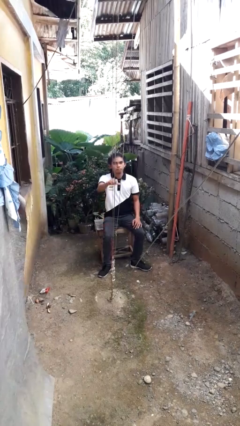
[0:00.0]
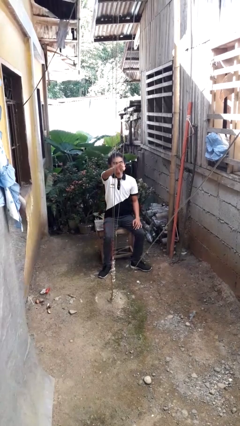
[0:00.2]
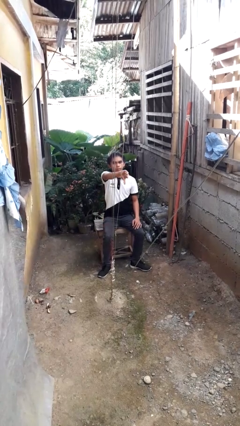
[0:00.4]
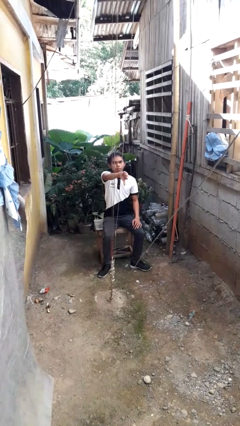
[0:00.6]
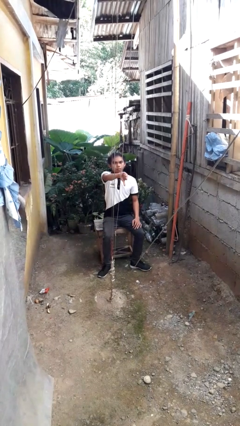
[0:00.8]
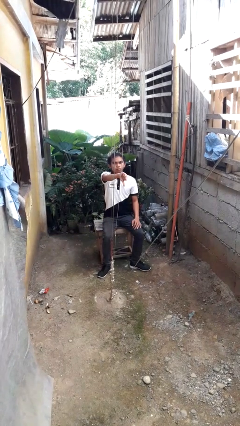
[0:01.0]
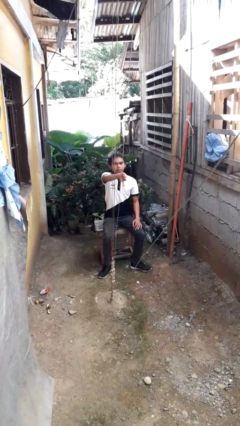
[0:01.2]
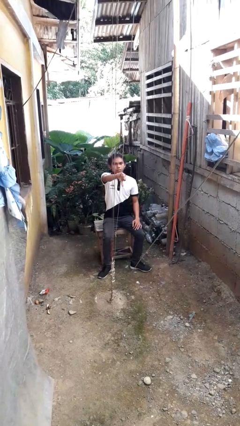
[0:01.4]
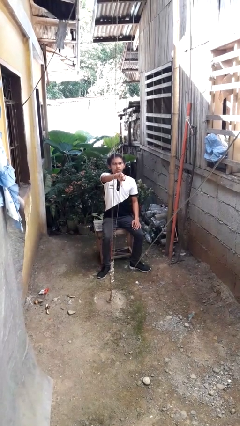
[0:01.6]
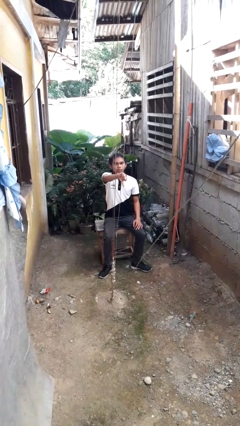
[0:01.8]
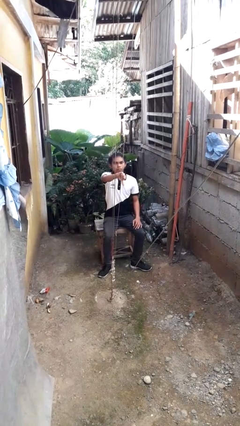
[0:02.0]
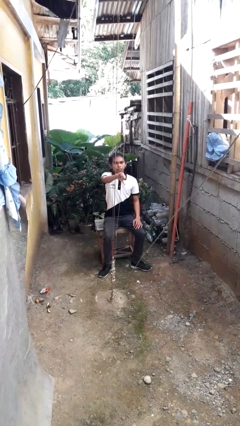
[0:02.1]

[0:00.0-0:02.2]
person gestures thumbs down

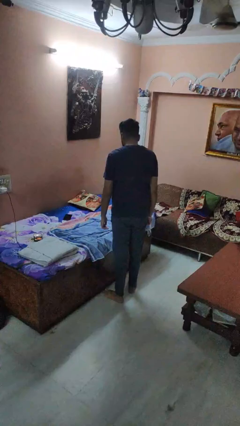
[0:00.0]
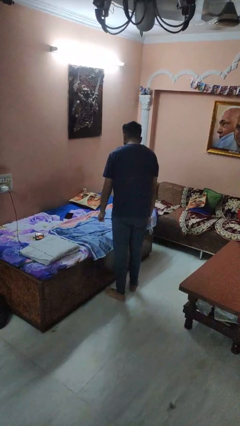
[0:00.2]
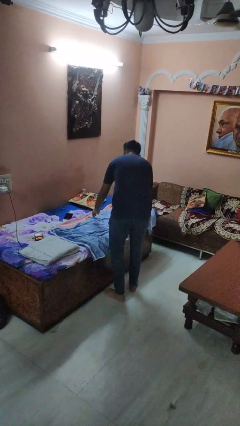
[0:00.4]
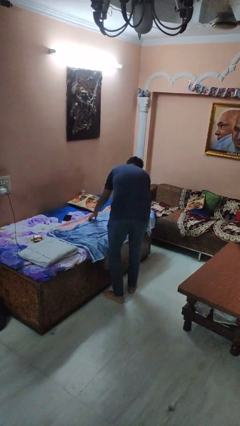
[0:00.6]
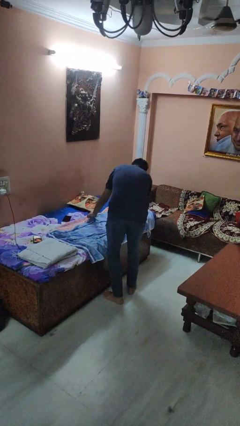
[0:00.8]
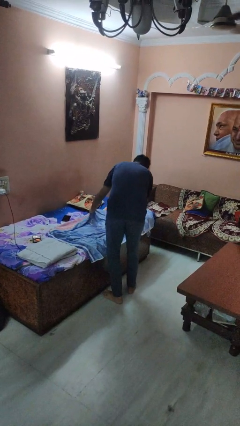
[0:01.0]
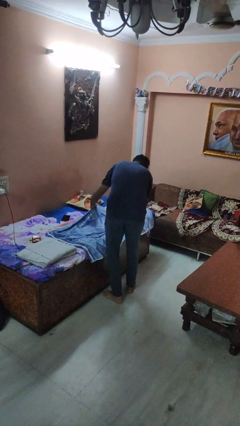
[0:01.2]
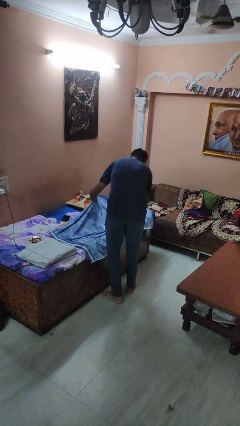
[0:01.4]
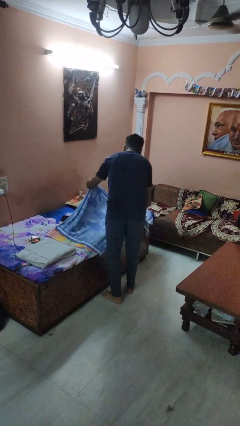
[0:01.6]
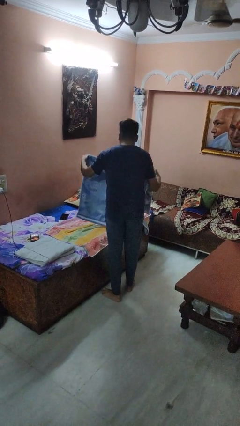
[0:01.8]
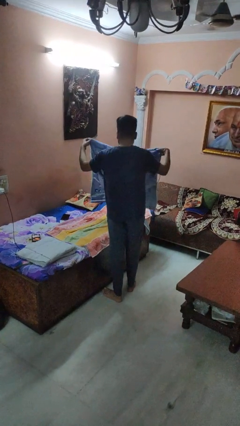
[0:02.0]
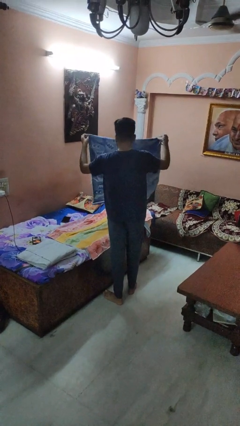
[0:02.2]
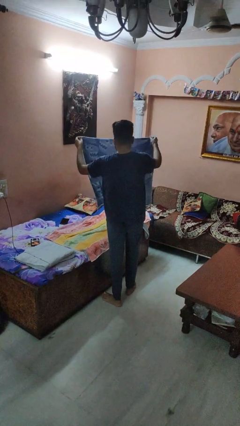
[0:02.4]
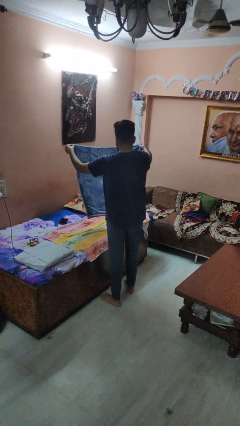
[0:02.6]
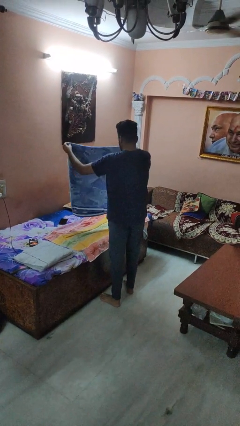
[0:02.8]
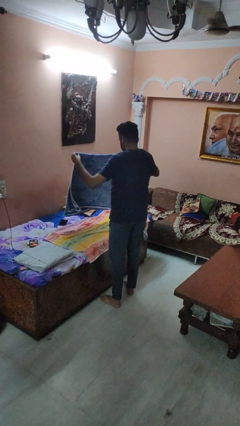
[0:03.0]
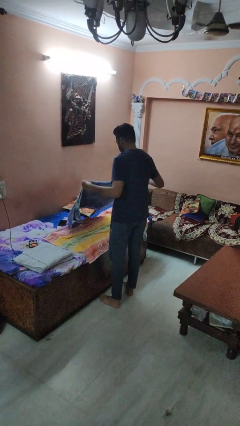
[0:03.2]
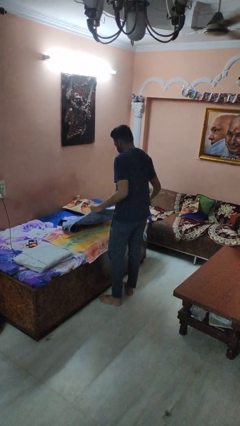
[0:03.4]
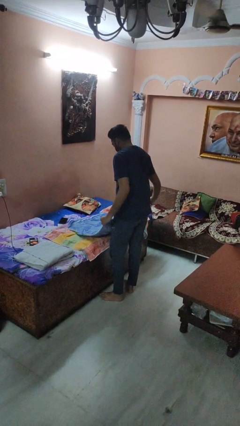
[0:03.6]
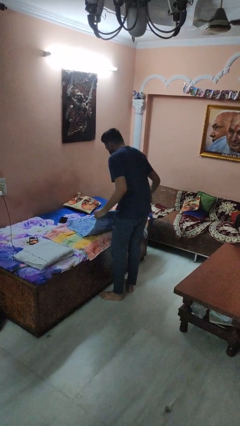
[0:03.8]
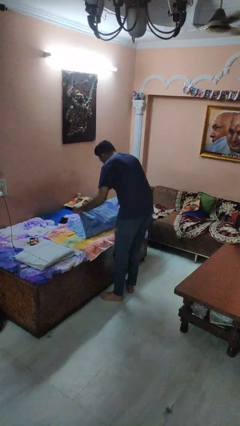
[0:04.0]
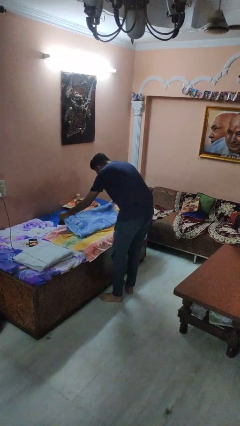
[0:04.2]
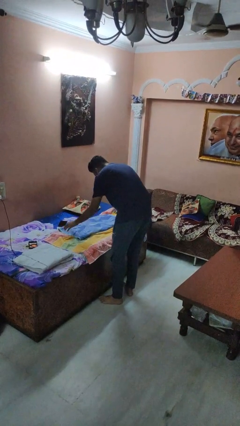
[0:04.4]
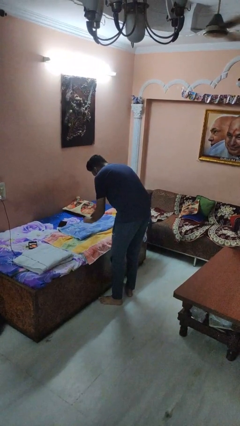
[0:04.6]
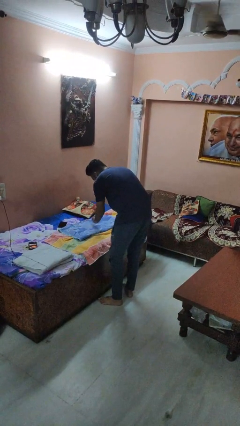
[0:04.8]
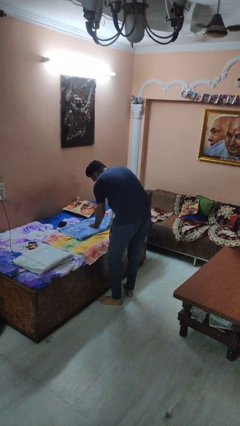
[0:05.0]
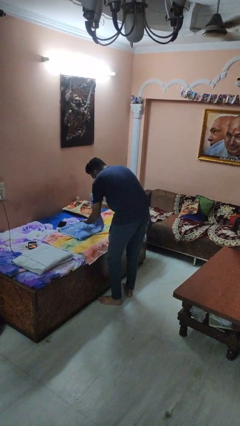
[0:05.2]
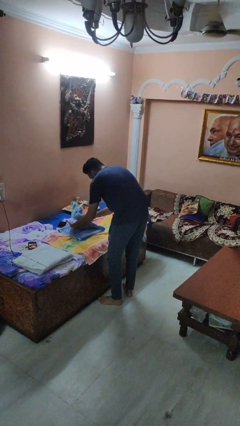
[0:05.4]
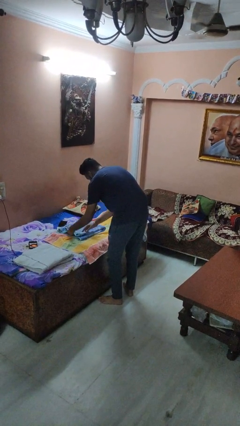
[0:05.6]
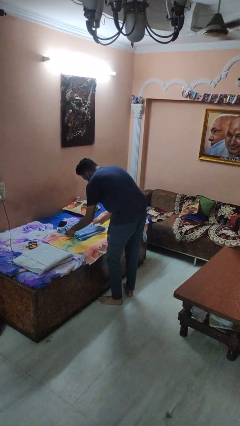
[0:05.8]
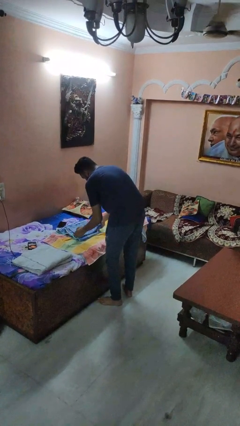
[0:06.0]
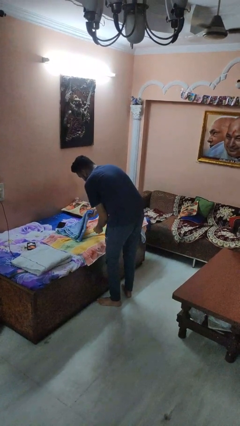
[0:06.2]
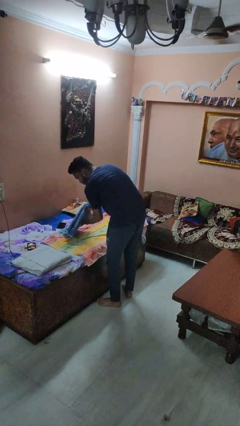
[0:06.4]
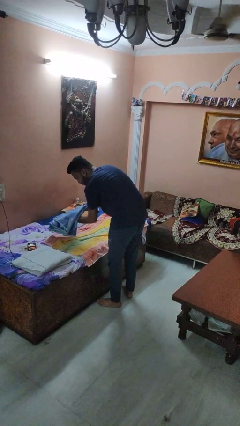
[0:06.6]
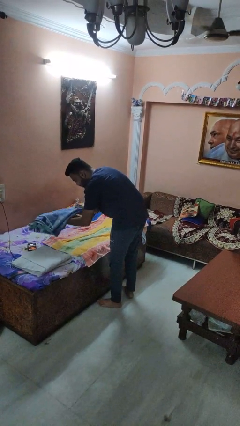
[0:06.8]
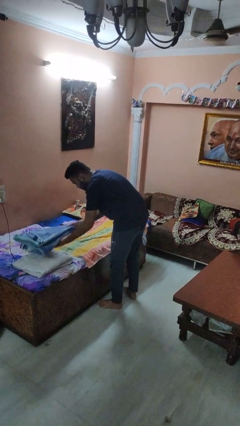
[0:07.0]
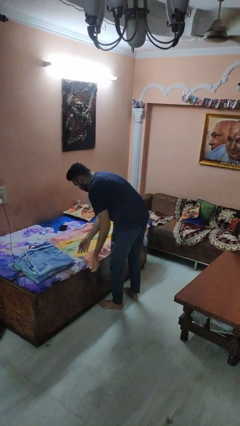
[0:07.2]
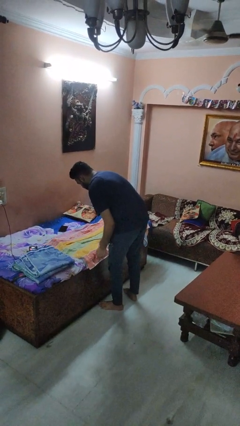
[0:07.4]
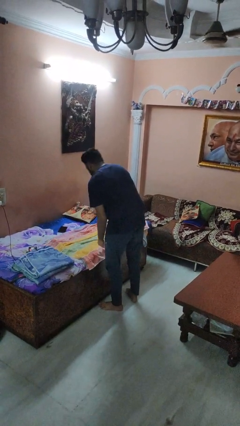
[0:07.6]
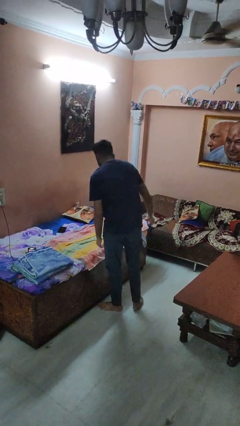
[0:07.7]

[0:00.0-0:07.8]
person folds towel

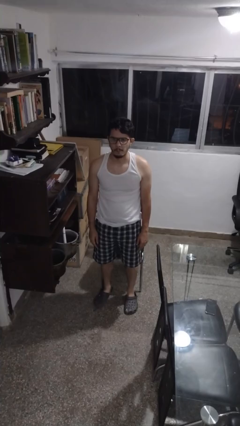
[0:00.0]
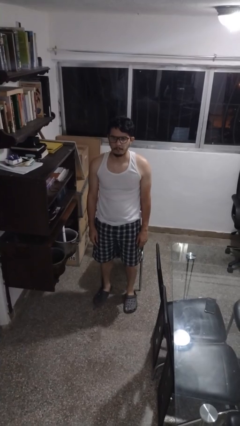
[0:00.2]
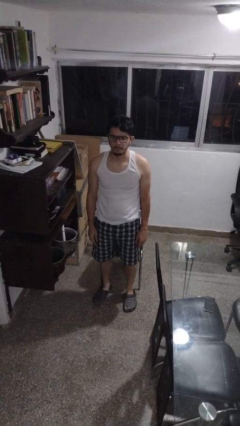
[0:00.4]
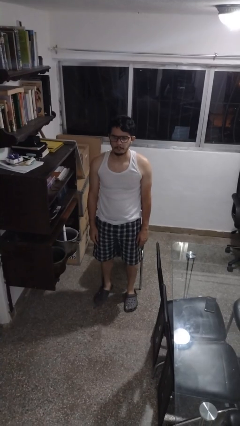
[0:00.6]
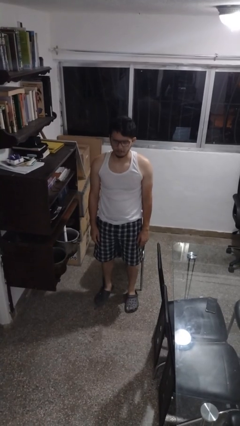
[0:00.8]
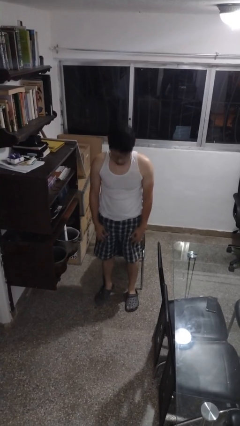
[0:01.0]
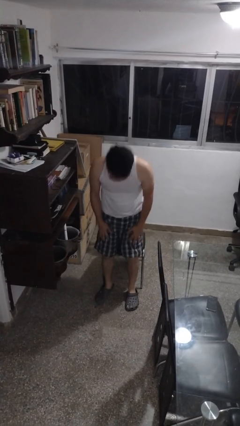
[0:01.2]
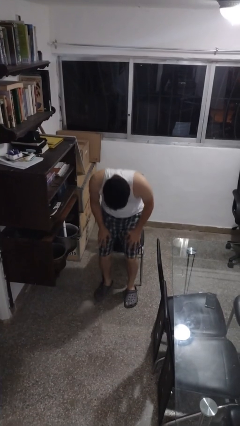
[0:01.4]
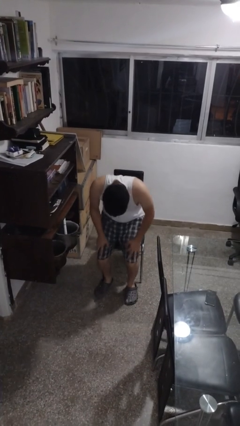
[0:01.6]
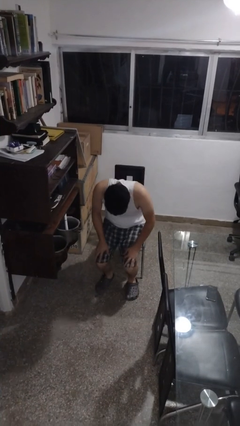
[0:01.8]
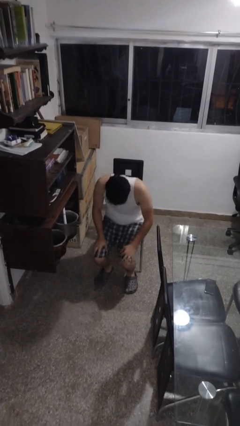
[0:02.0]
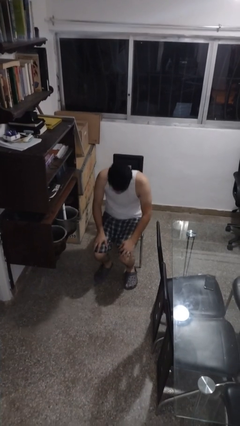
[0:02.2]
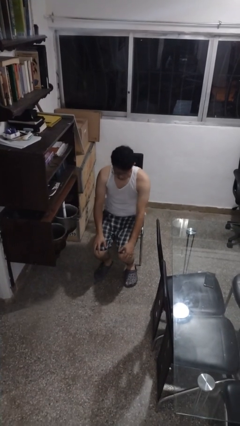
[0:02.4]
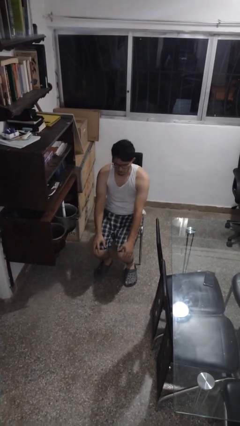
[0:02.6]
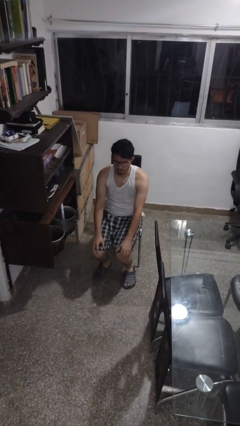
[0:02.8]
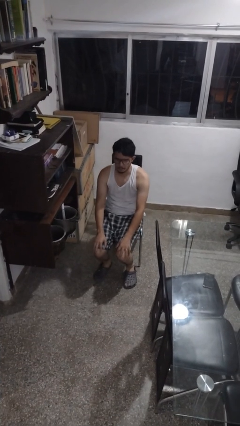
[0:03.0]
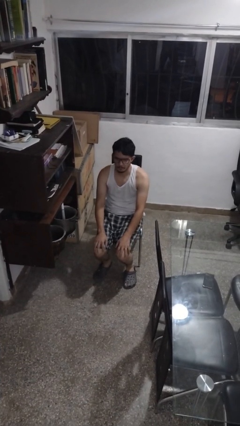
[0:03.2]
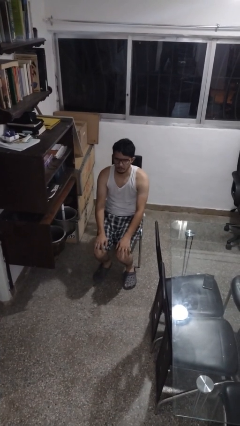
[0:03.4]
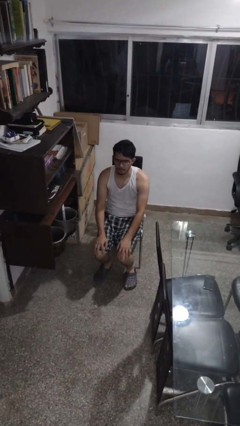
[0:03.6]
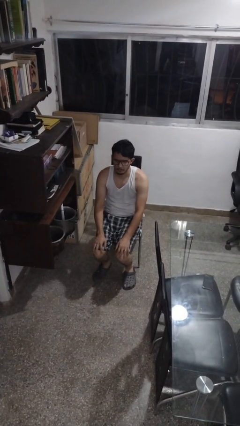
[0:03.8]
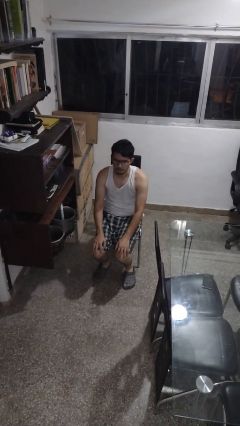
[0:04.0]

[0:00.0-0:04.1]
person sits down

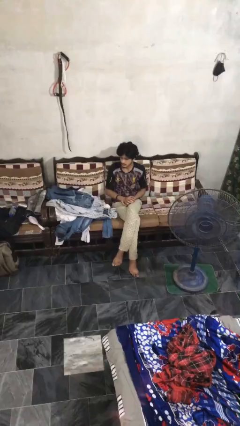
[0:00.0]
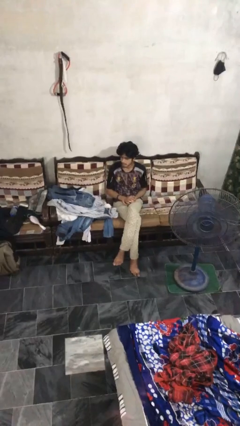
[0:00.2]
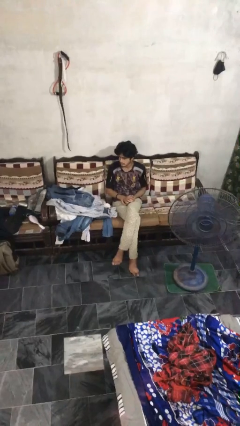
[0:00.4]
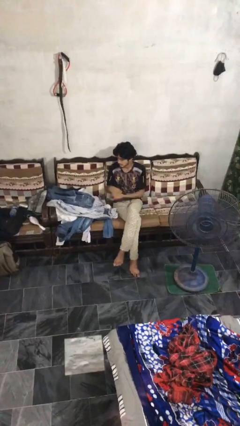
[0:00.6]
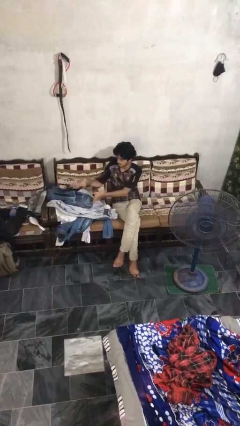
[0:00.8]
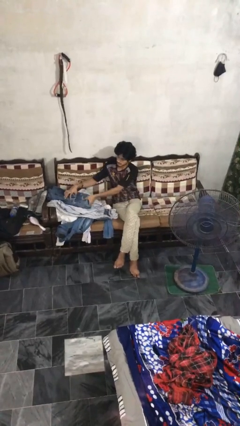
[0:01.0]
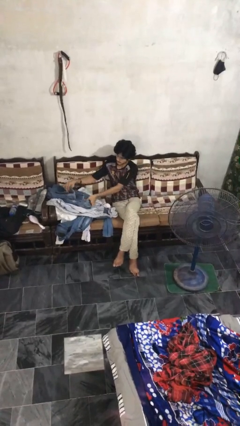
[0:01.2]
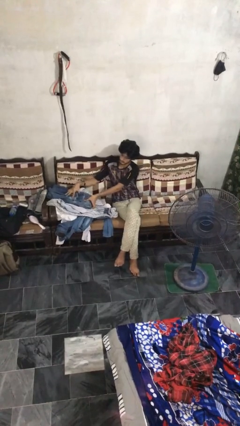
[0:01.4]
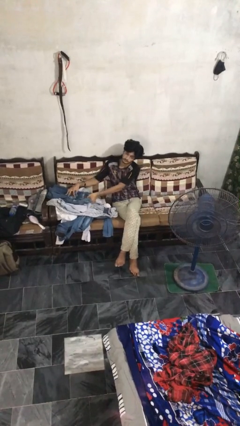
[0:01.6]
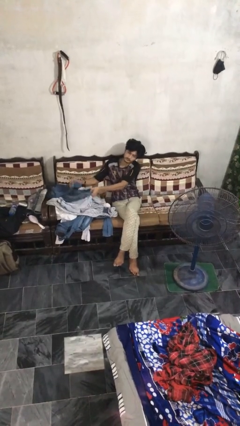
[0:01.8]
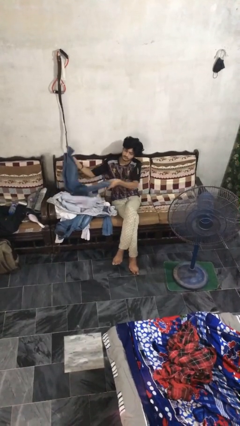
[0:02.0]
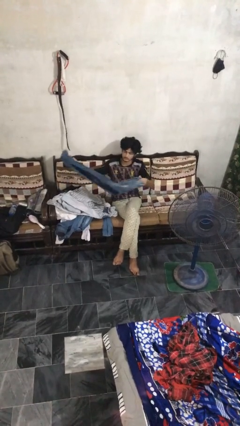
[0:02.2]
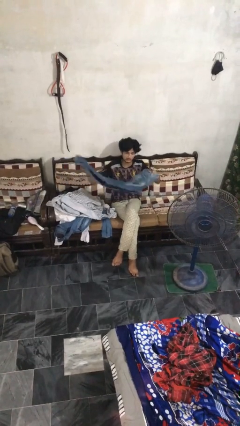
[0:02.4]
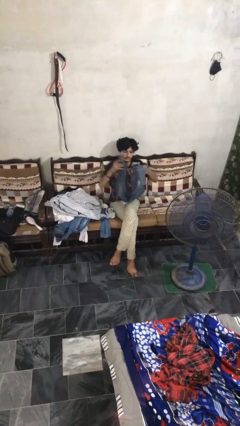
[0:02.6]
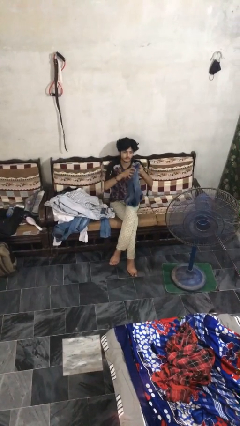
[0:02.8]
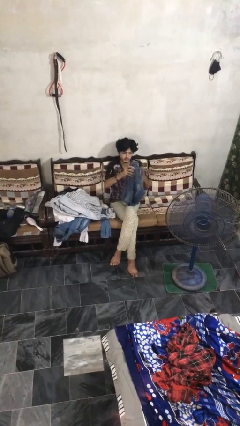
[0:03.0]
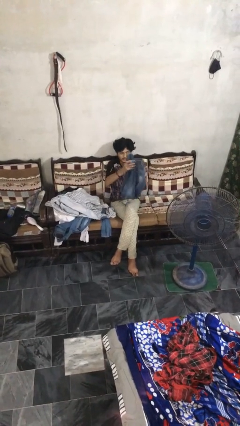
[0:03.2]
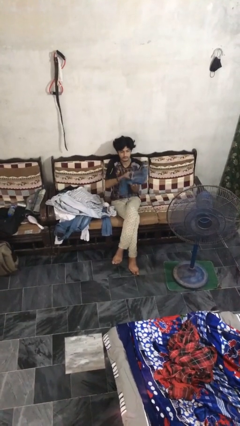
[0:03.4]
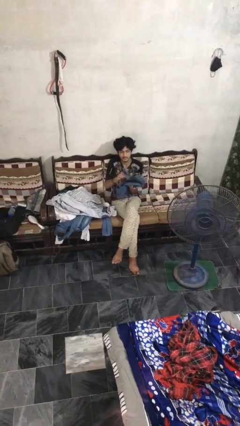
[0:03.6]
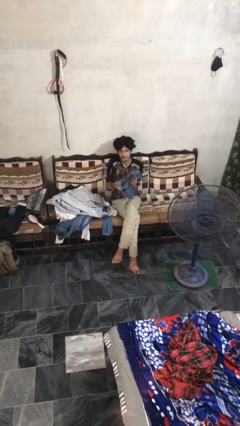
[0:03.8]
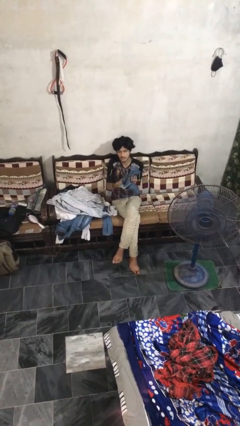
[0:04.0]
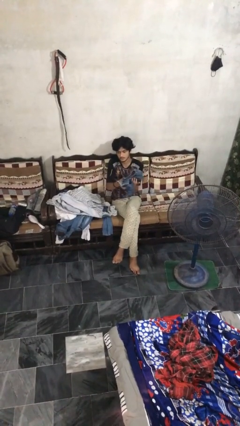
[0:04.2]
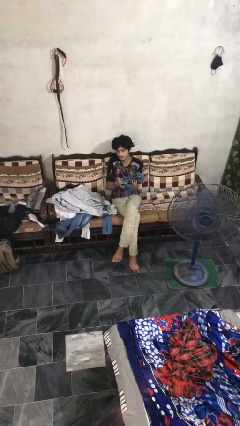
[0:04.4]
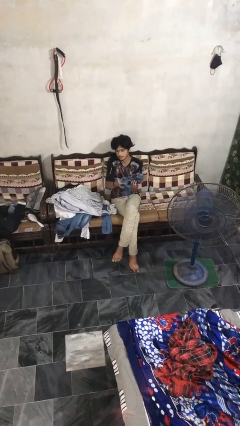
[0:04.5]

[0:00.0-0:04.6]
person folds pants
